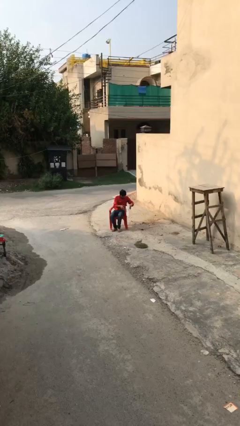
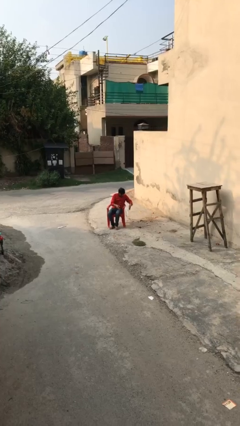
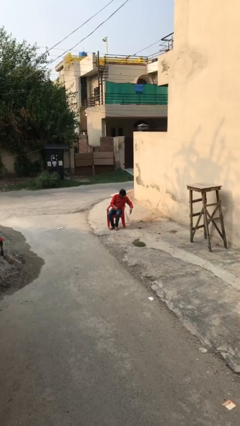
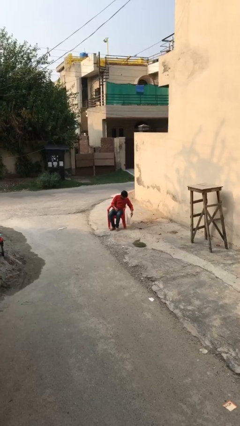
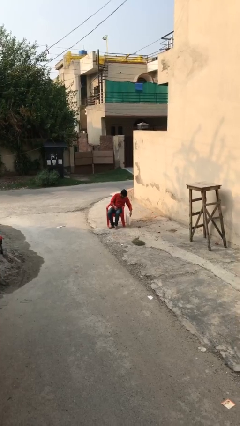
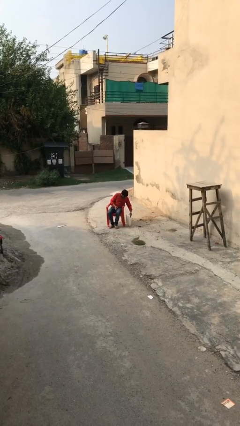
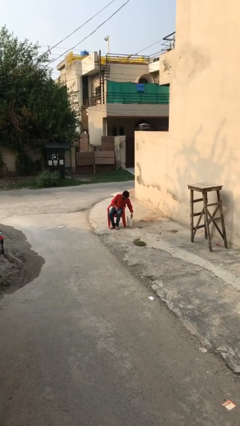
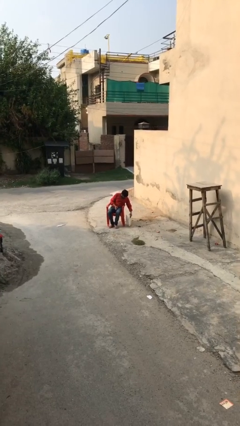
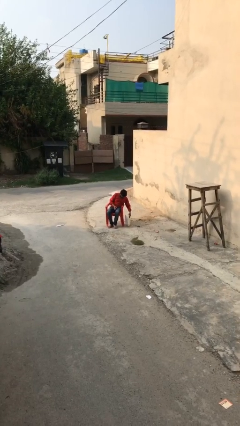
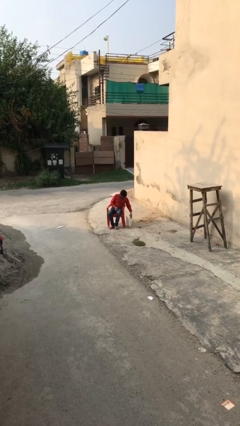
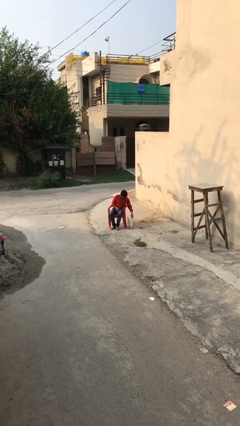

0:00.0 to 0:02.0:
person puts down object on floor

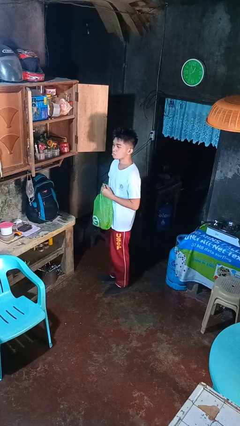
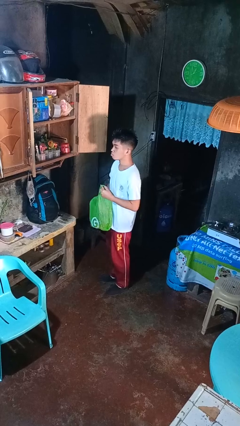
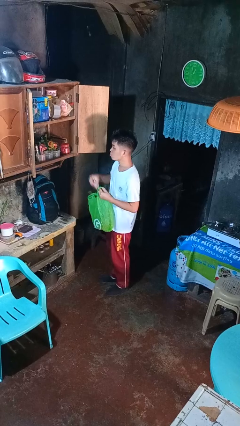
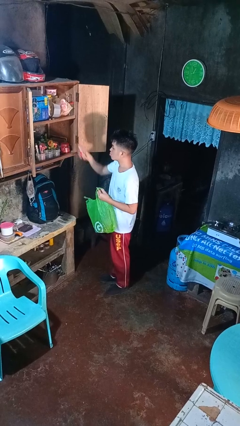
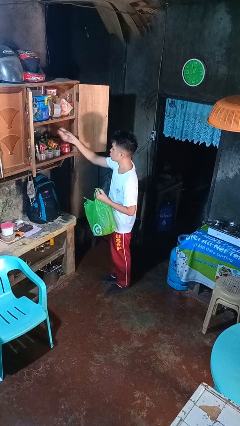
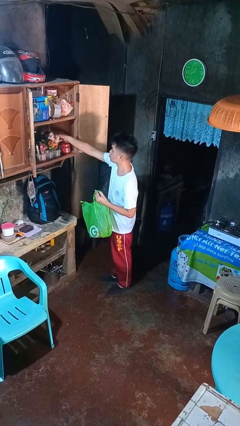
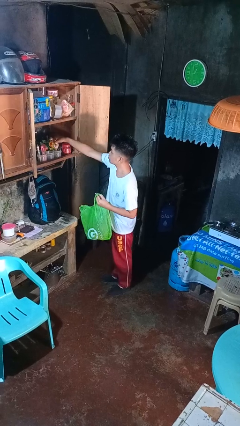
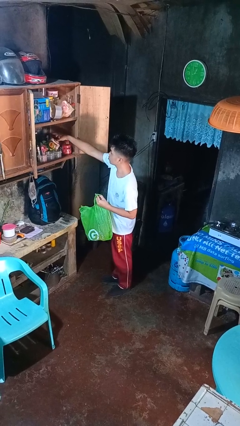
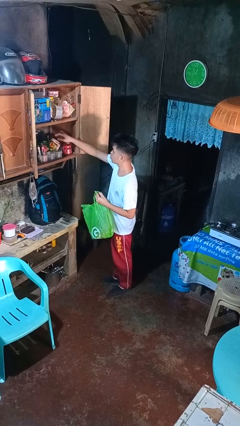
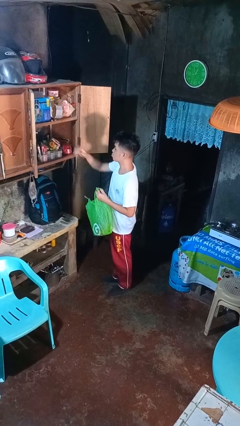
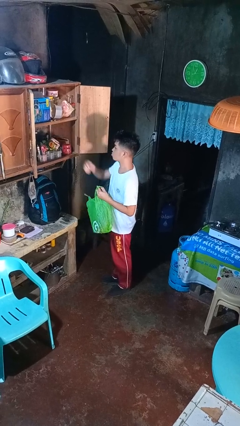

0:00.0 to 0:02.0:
person loads groceries into cabinet

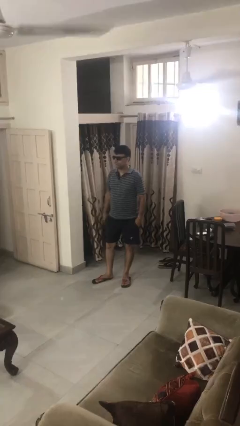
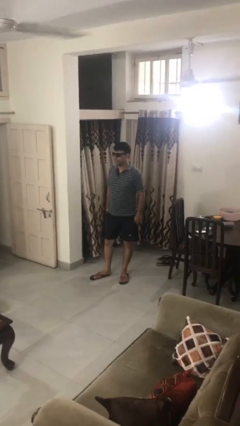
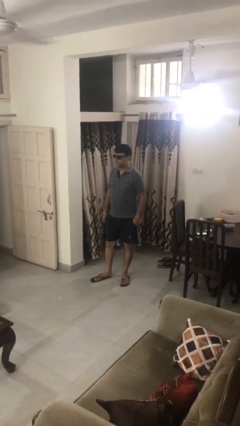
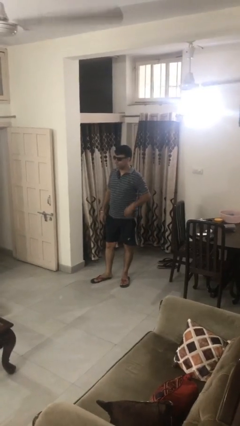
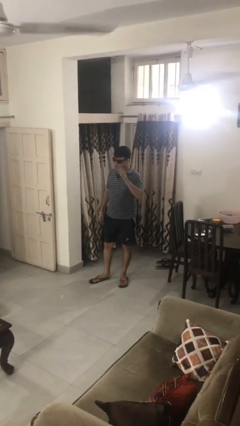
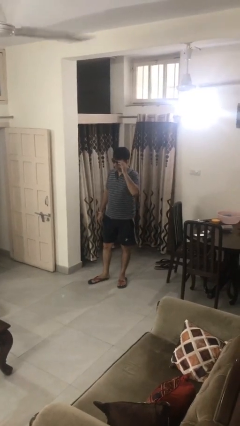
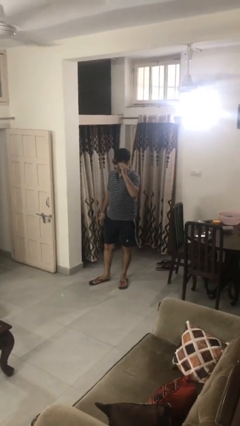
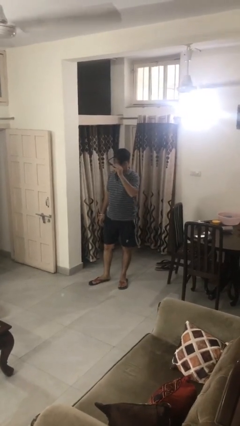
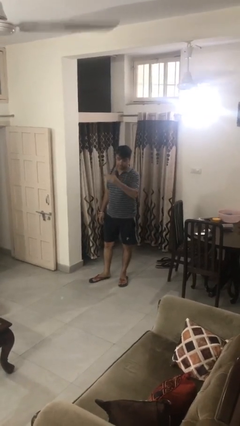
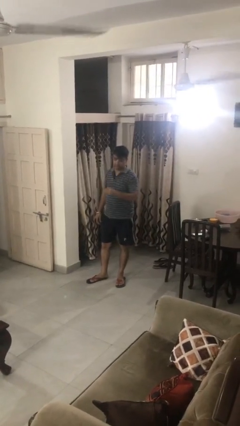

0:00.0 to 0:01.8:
person takes off sunglasses

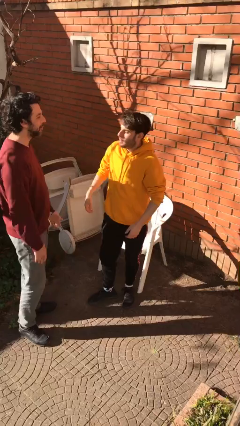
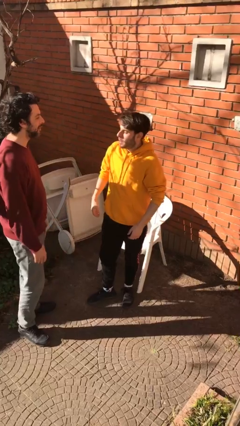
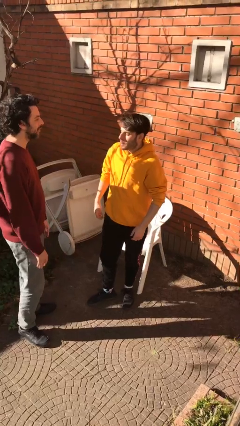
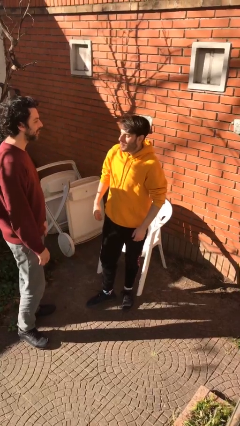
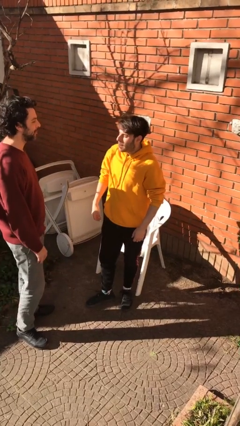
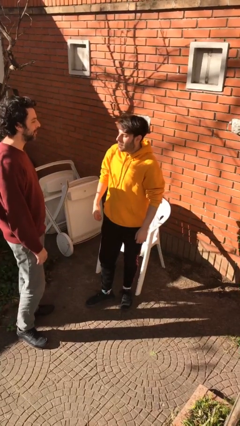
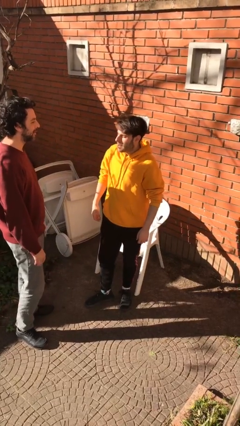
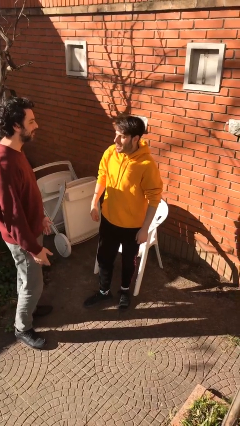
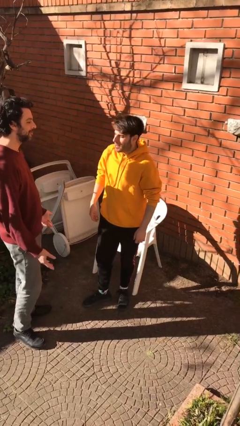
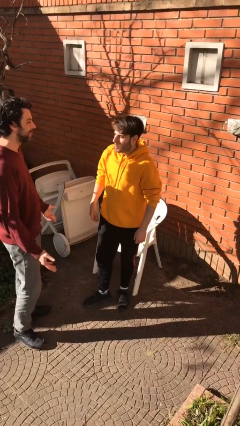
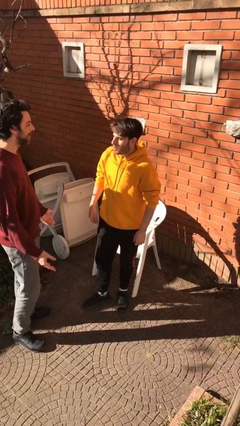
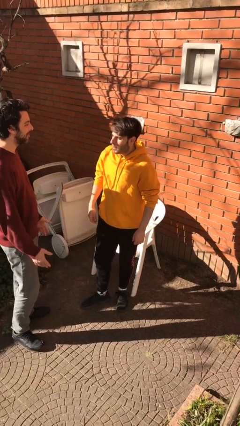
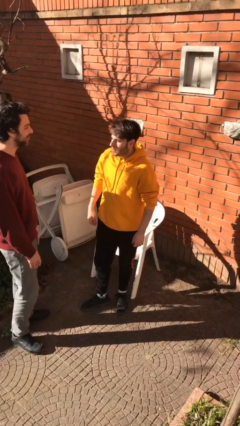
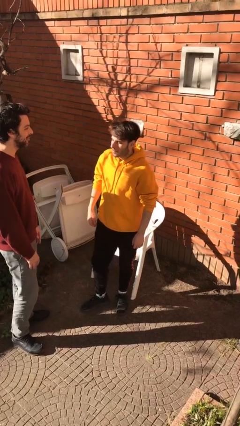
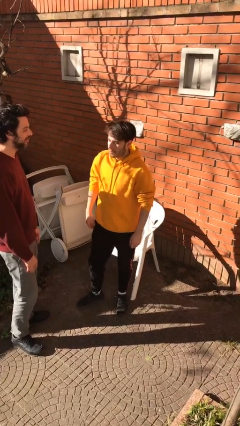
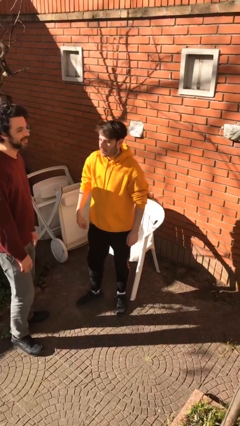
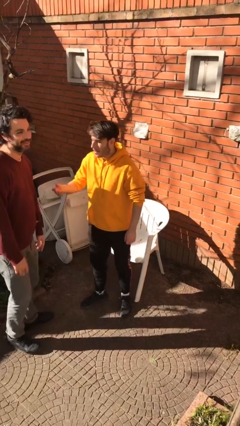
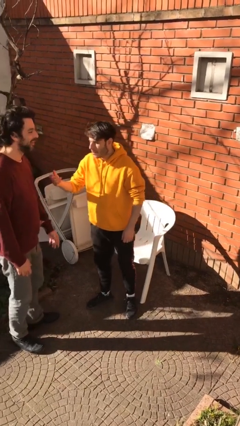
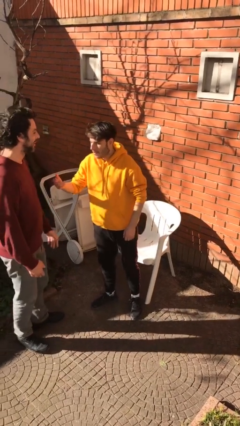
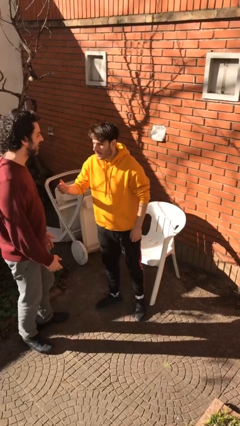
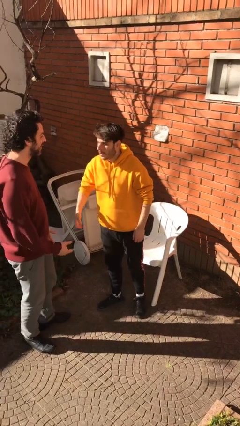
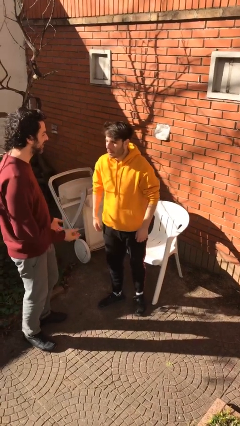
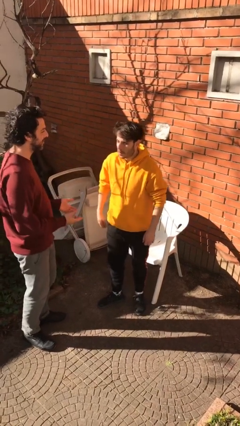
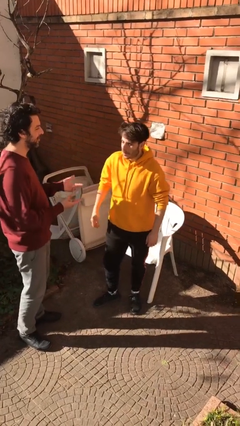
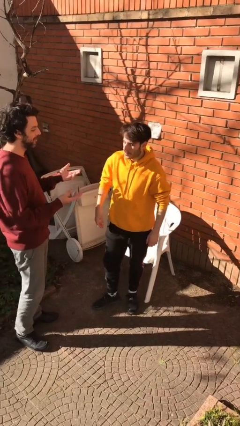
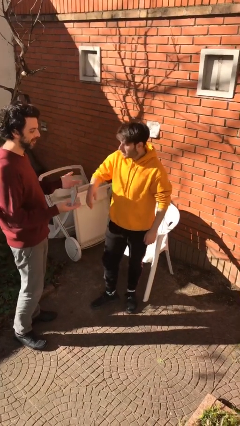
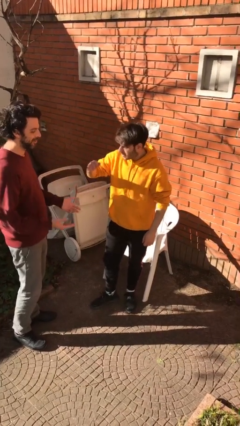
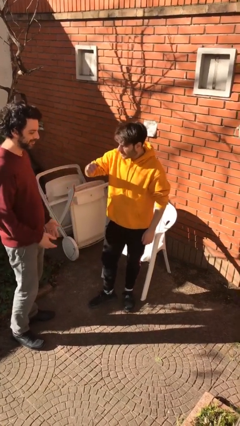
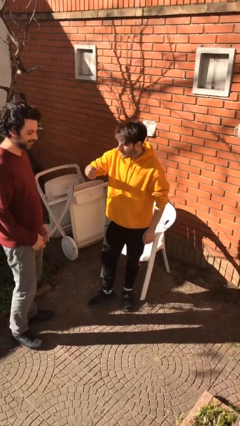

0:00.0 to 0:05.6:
person talks to person

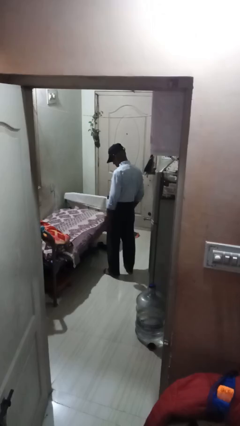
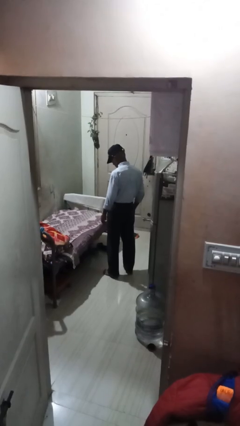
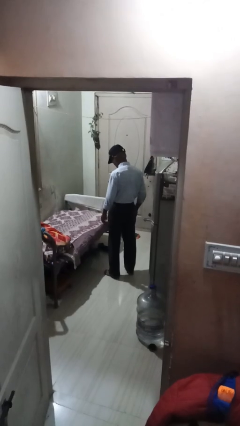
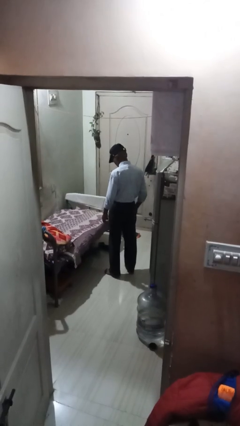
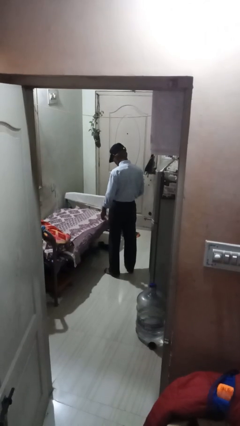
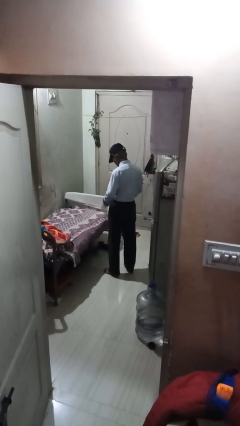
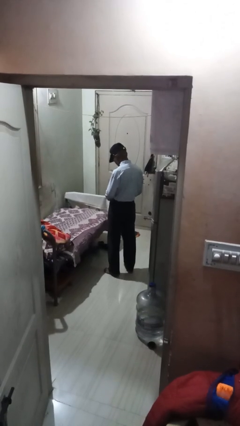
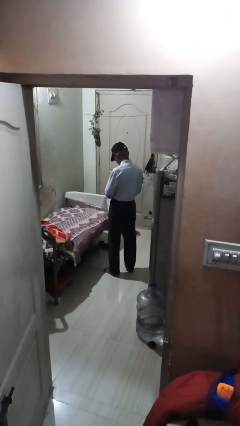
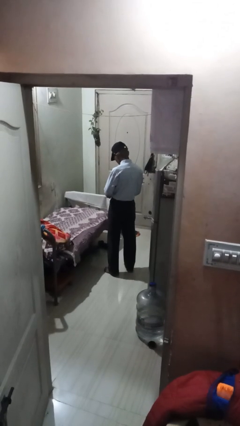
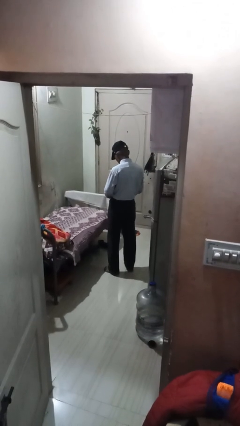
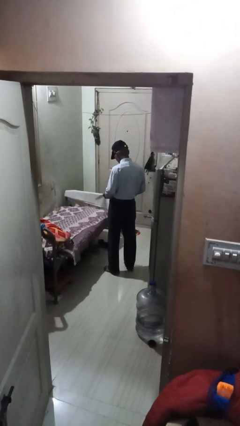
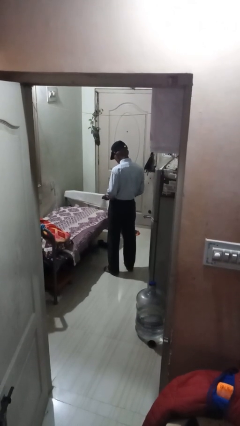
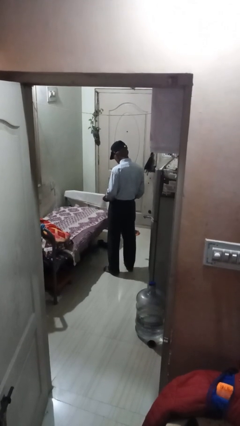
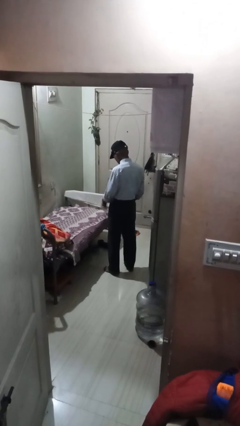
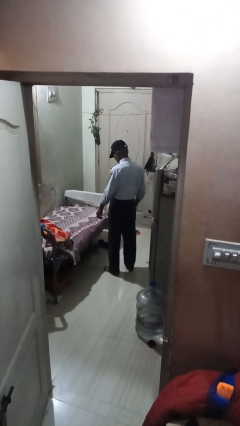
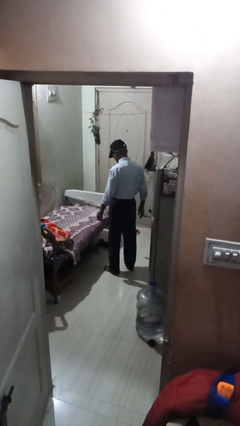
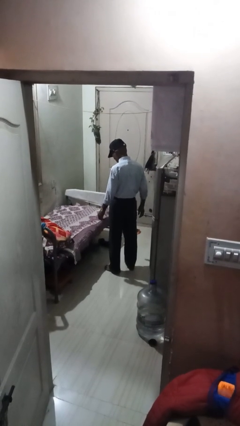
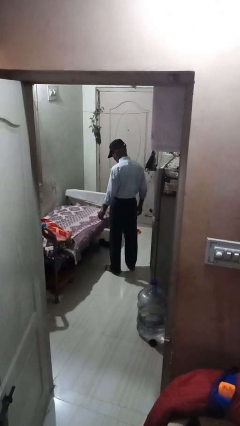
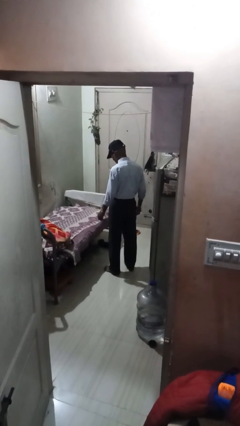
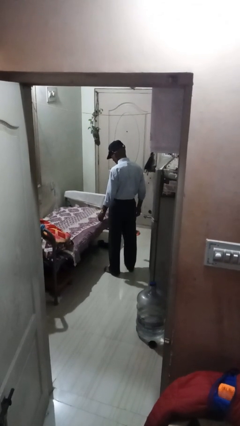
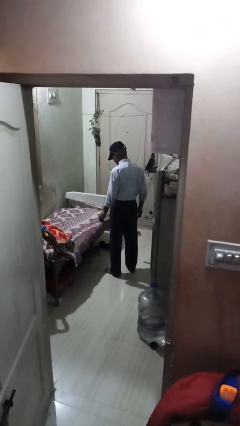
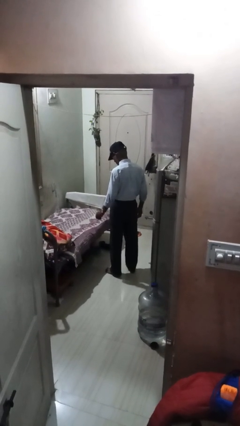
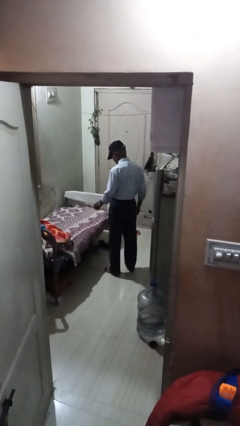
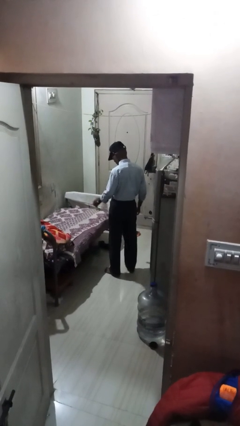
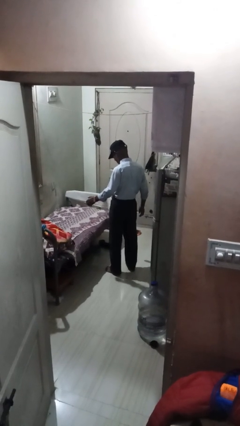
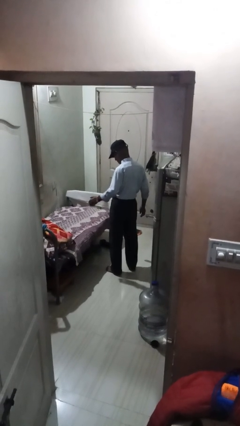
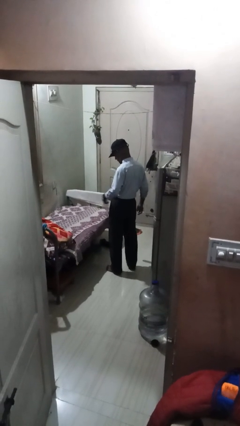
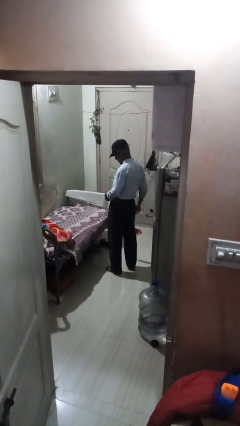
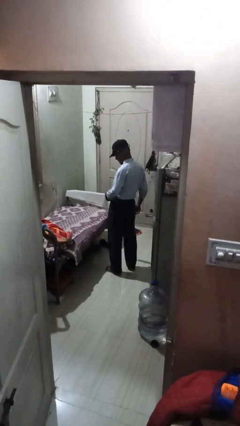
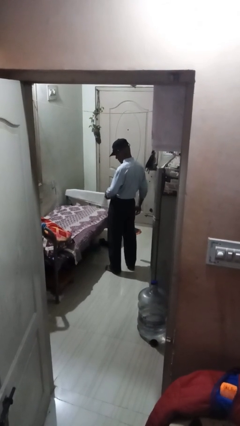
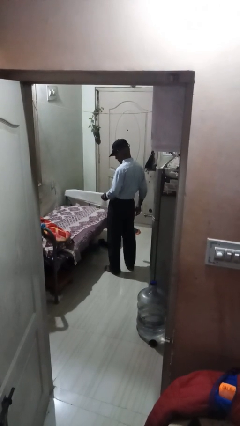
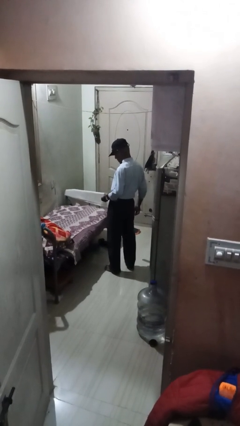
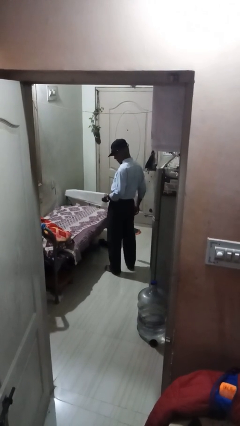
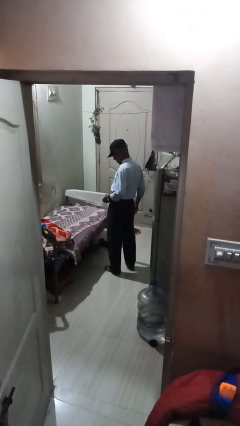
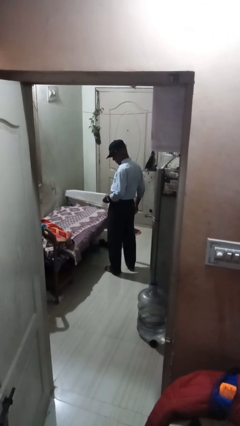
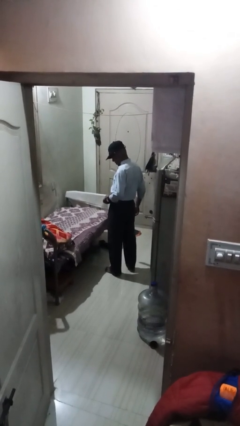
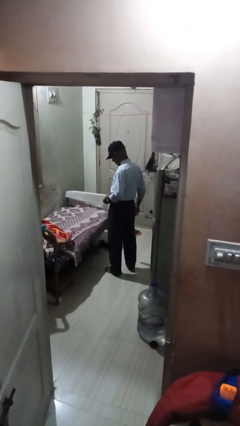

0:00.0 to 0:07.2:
person takes off belt
